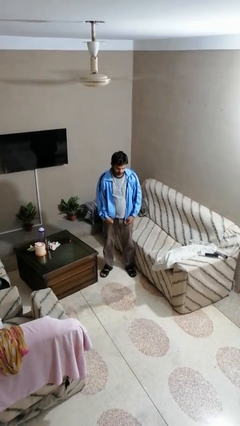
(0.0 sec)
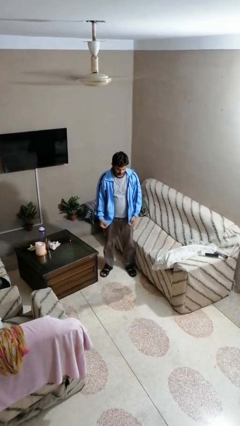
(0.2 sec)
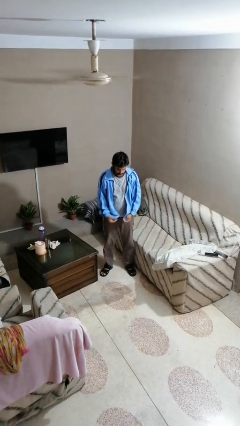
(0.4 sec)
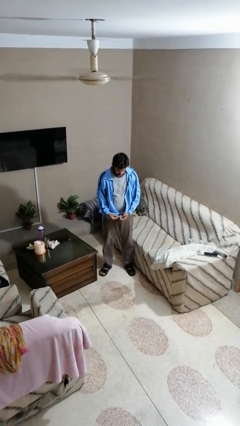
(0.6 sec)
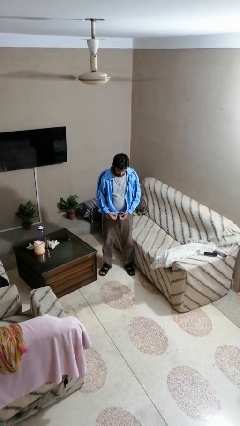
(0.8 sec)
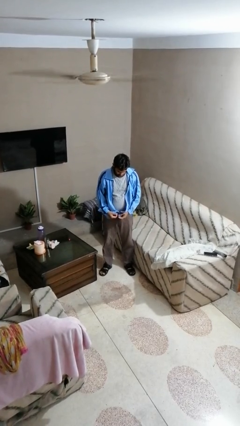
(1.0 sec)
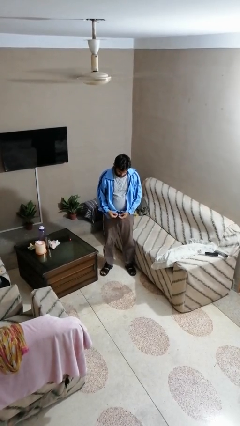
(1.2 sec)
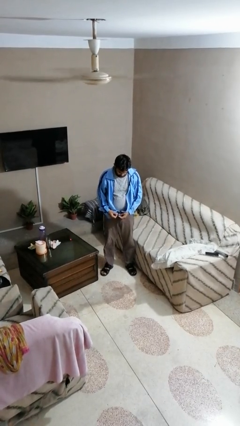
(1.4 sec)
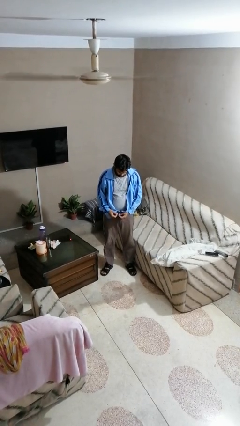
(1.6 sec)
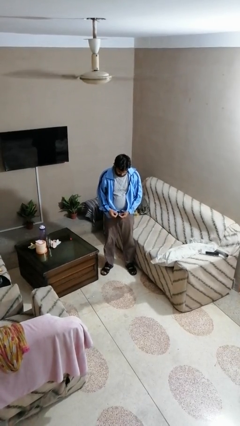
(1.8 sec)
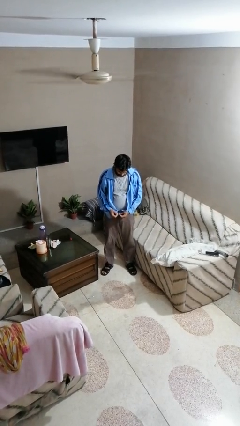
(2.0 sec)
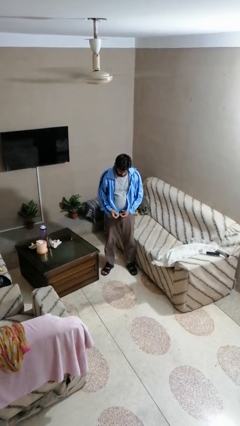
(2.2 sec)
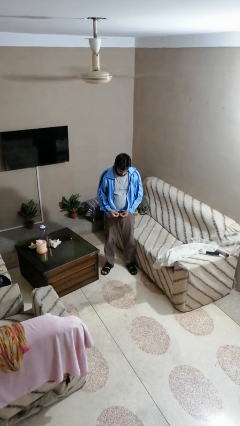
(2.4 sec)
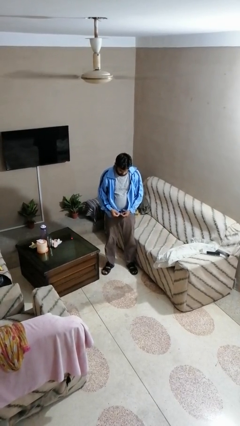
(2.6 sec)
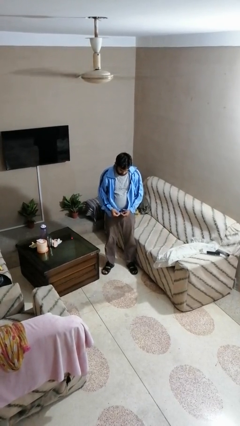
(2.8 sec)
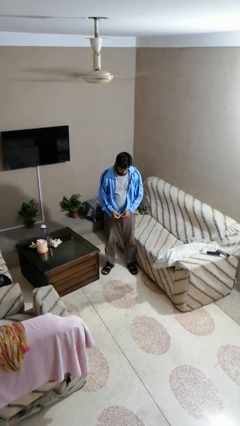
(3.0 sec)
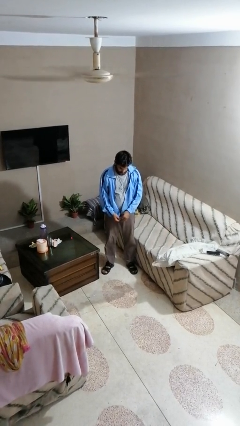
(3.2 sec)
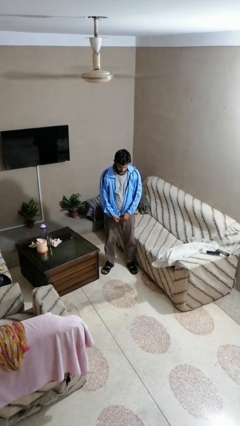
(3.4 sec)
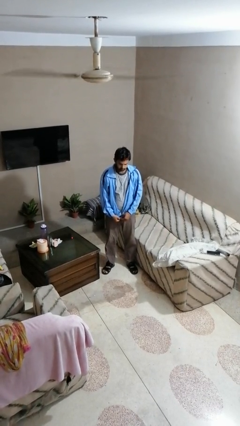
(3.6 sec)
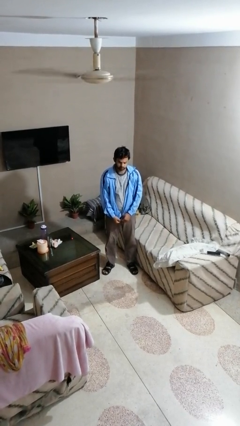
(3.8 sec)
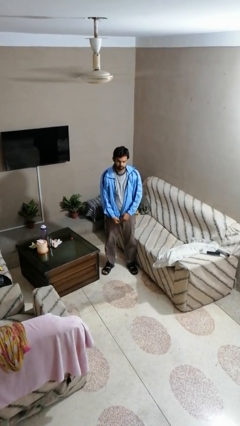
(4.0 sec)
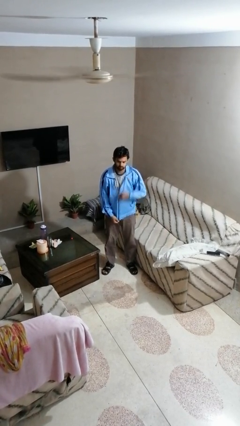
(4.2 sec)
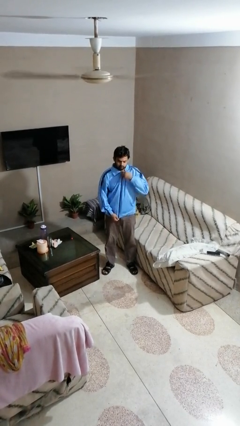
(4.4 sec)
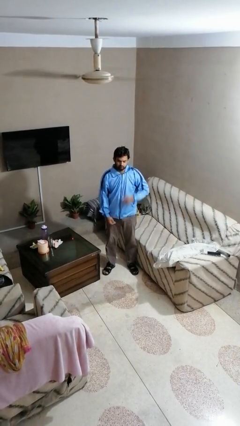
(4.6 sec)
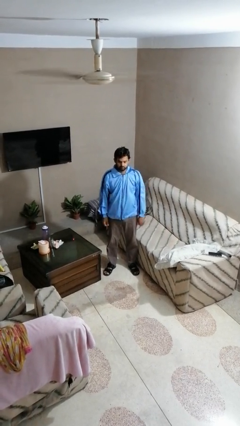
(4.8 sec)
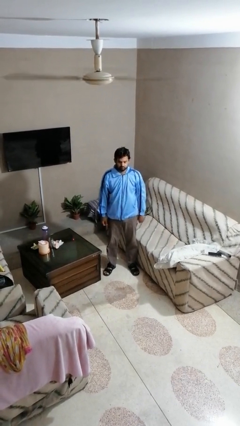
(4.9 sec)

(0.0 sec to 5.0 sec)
person zips up jacket

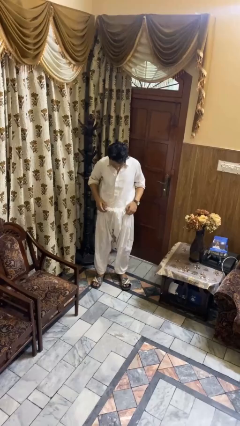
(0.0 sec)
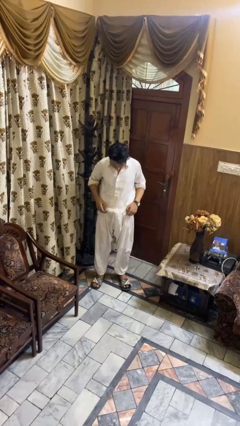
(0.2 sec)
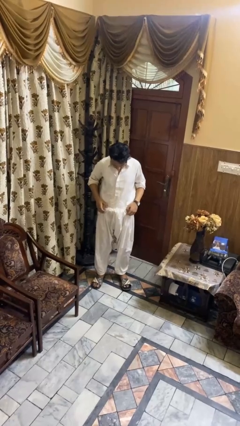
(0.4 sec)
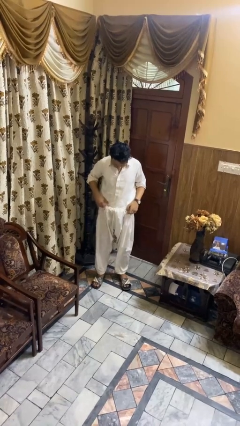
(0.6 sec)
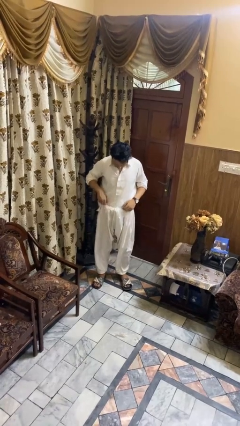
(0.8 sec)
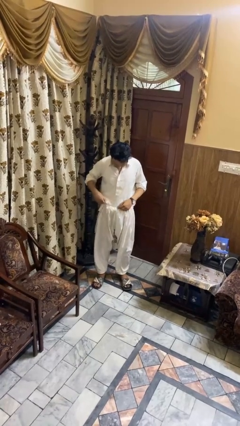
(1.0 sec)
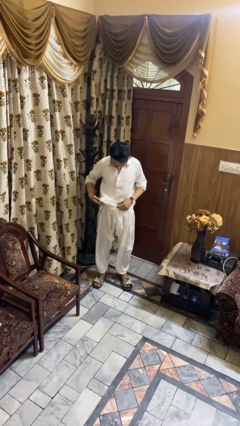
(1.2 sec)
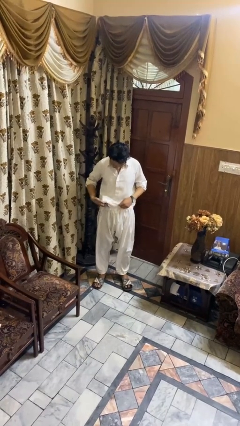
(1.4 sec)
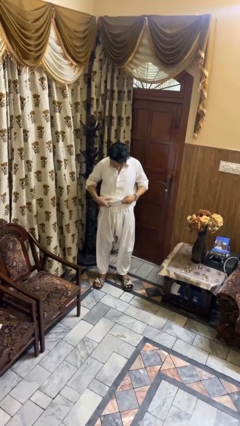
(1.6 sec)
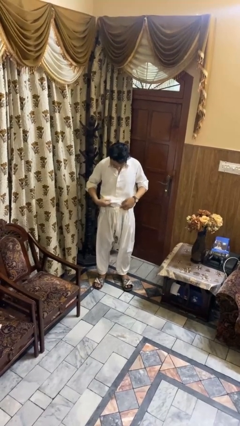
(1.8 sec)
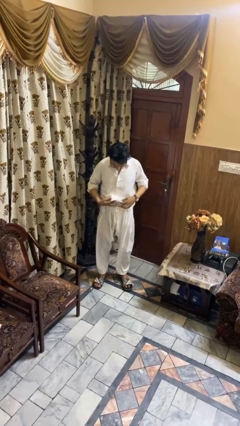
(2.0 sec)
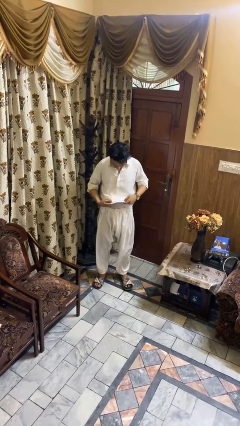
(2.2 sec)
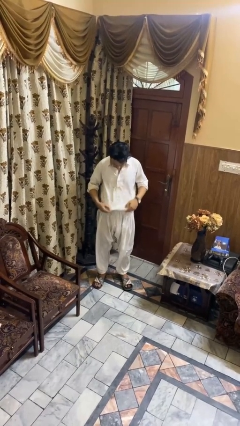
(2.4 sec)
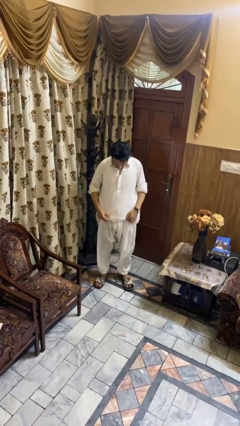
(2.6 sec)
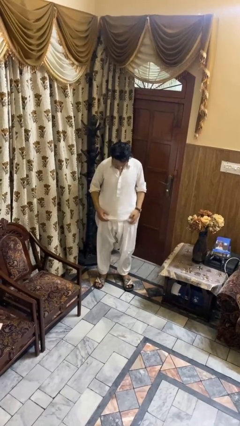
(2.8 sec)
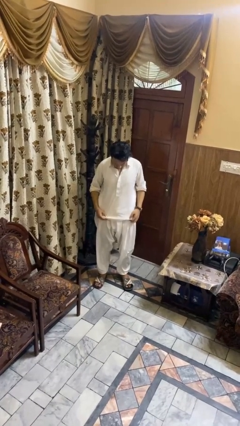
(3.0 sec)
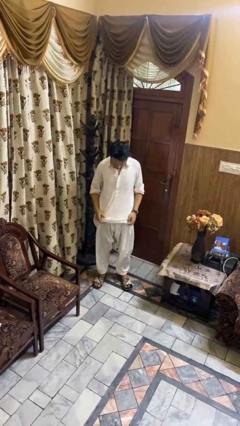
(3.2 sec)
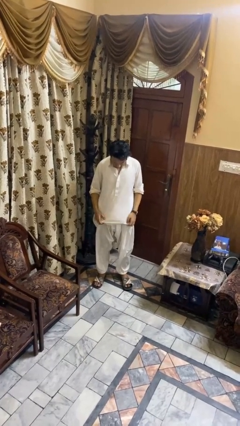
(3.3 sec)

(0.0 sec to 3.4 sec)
person untucks shirt

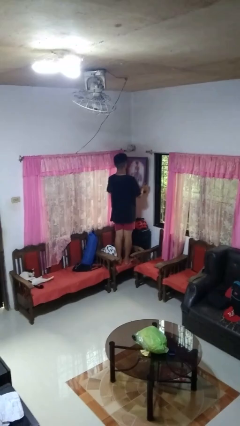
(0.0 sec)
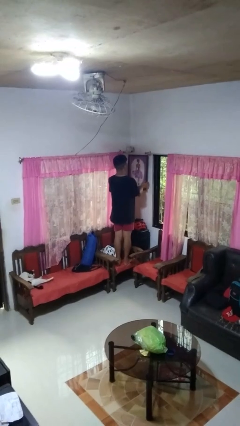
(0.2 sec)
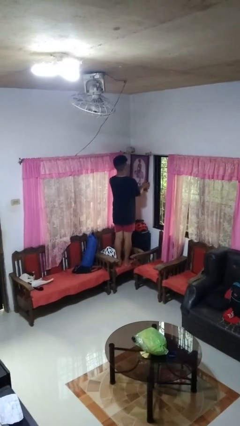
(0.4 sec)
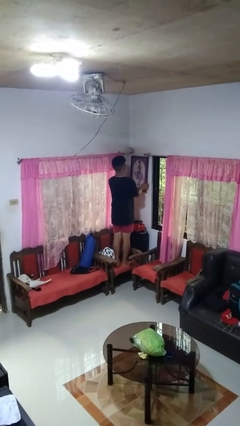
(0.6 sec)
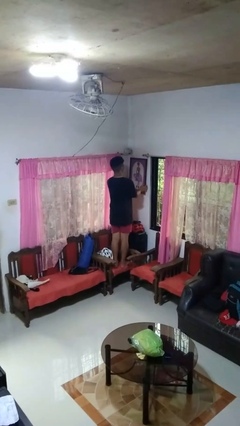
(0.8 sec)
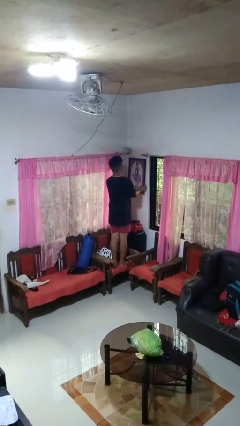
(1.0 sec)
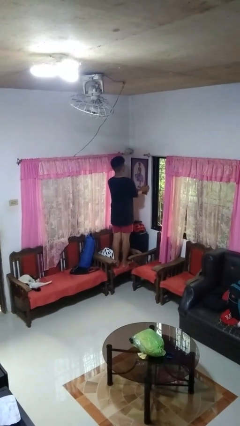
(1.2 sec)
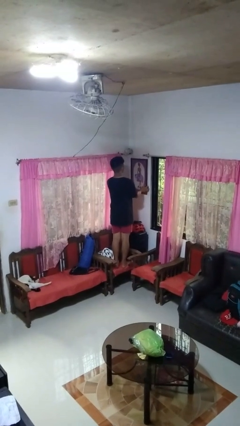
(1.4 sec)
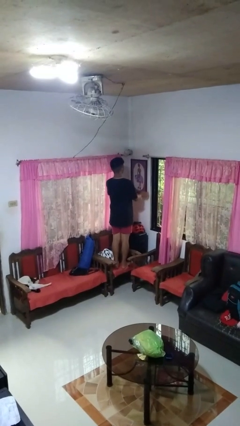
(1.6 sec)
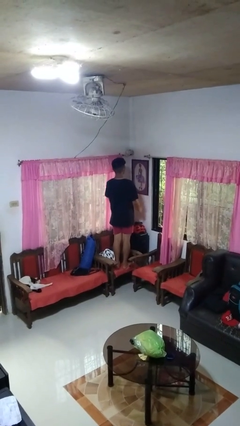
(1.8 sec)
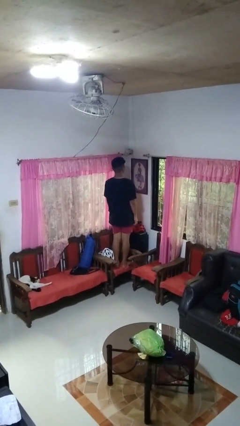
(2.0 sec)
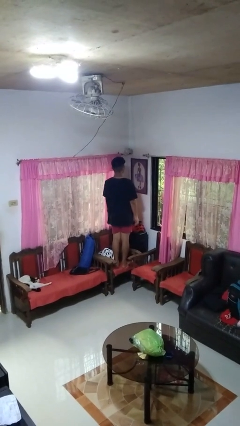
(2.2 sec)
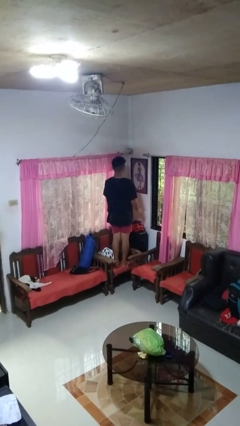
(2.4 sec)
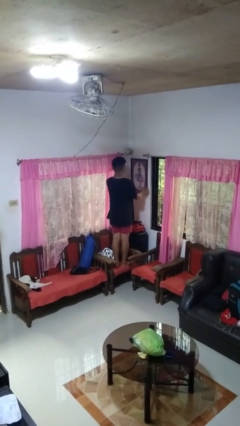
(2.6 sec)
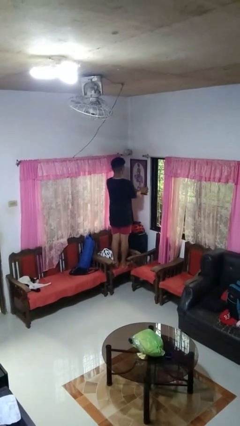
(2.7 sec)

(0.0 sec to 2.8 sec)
person puts up picture frame

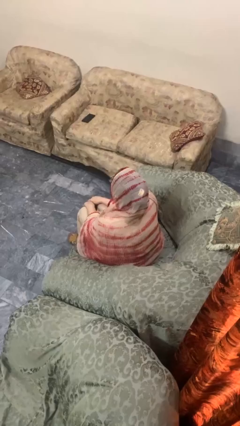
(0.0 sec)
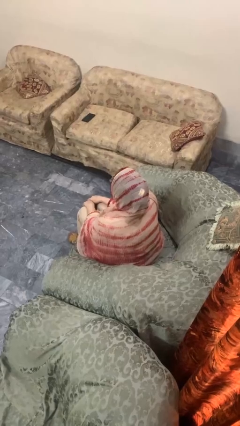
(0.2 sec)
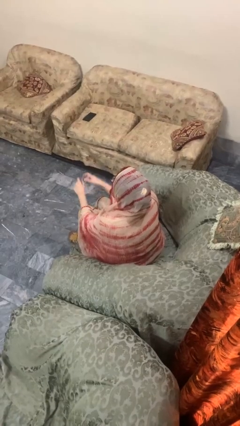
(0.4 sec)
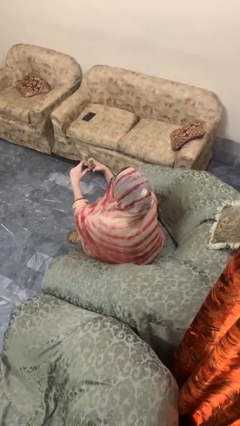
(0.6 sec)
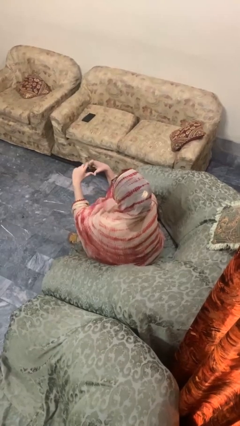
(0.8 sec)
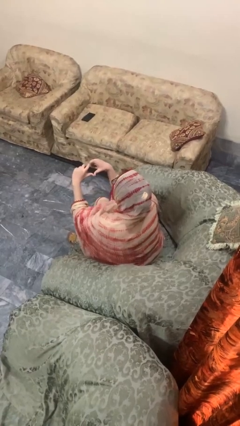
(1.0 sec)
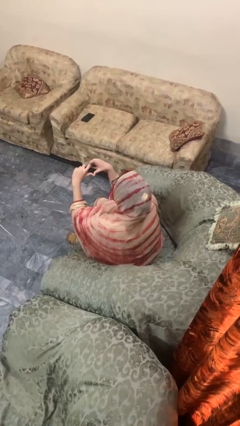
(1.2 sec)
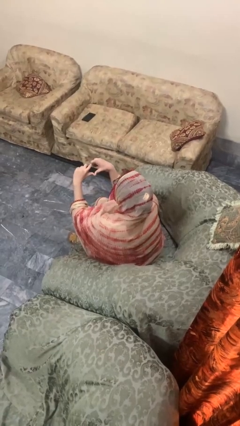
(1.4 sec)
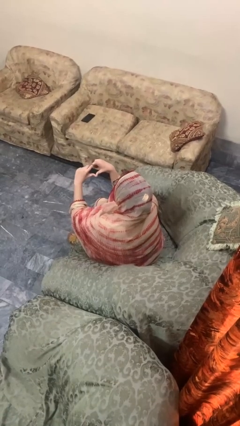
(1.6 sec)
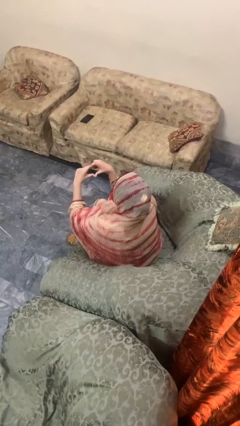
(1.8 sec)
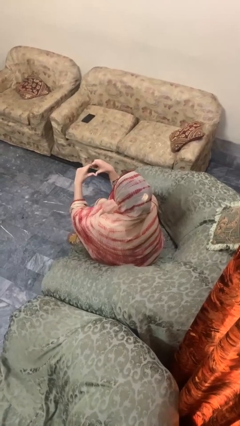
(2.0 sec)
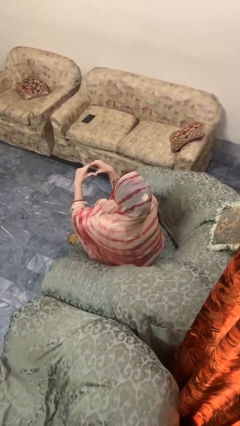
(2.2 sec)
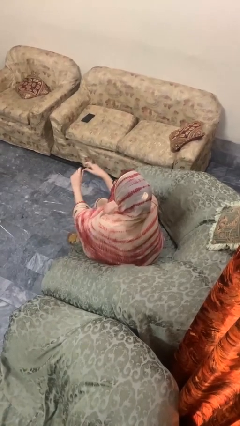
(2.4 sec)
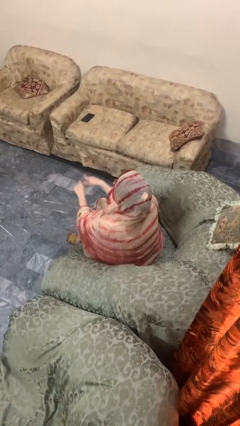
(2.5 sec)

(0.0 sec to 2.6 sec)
person gestures heart

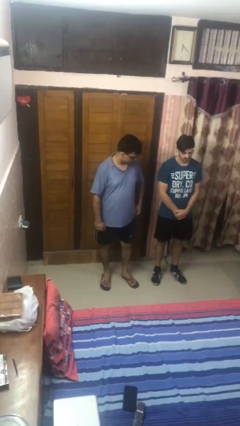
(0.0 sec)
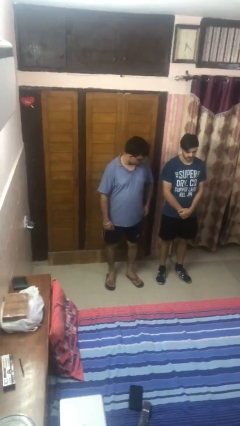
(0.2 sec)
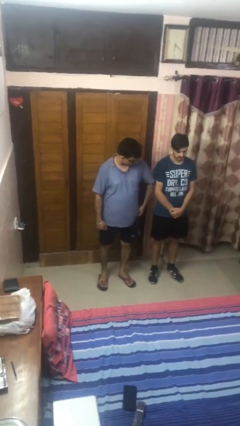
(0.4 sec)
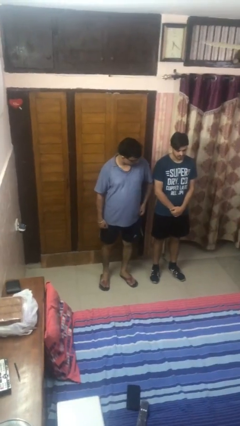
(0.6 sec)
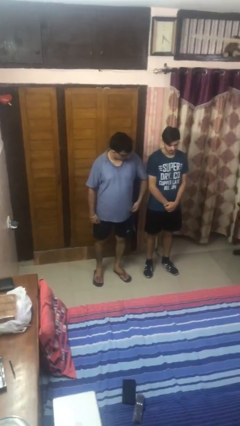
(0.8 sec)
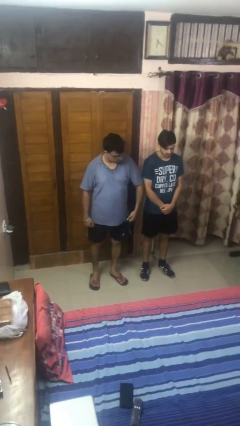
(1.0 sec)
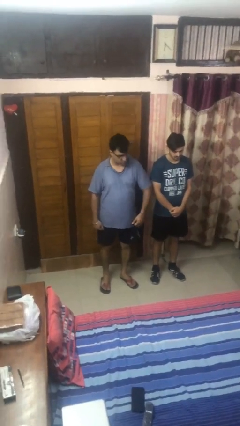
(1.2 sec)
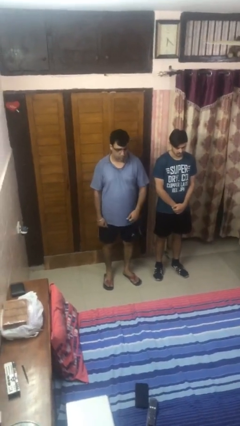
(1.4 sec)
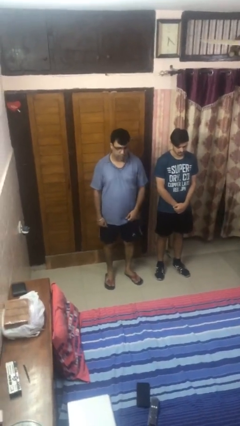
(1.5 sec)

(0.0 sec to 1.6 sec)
person nudges person with elbow

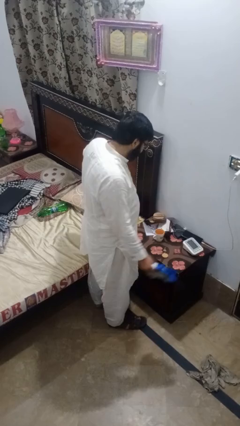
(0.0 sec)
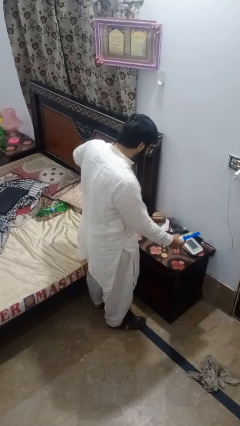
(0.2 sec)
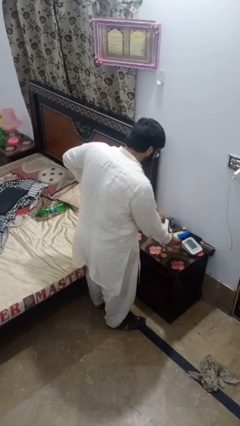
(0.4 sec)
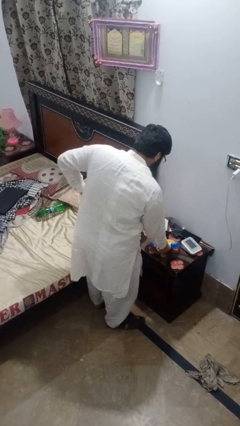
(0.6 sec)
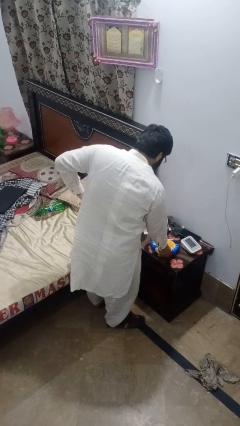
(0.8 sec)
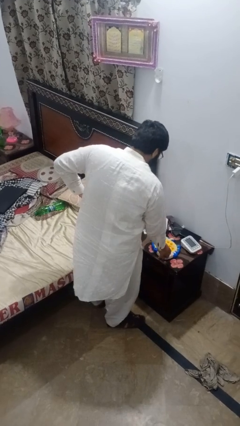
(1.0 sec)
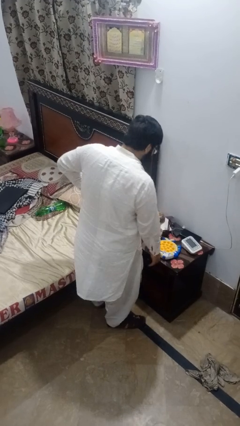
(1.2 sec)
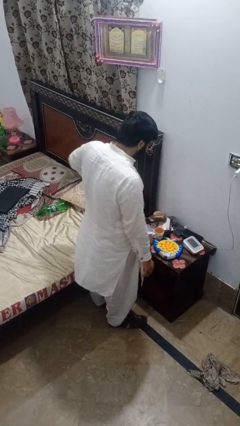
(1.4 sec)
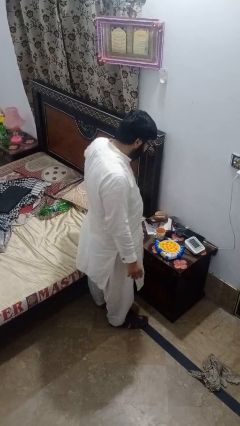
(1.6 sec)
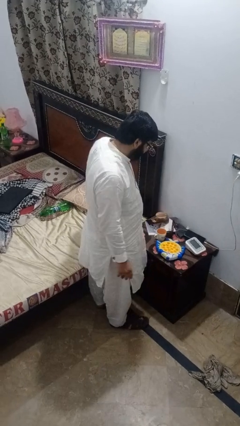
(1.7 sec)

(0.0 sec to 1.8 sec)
person puts down object on countertop

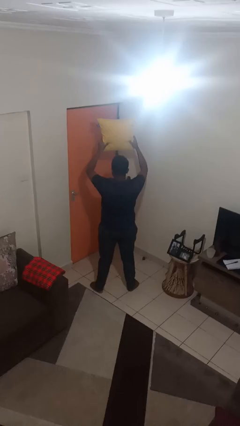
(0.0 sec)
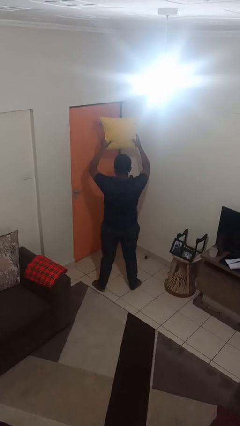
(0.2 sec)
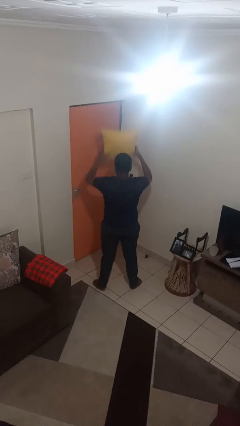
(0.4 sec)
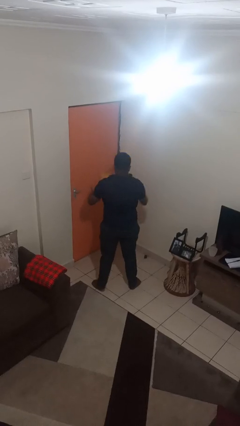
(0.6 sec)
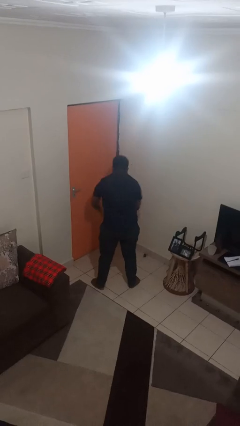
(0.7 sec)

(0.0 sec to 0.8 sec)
person drops object
